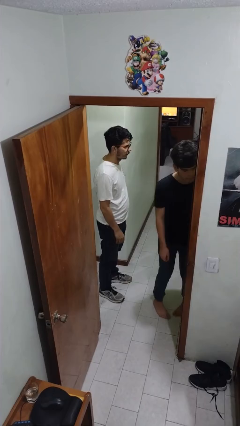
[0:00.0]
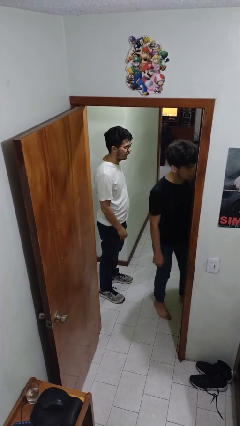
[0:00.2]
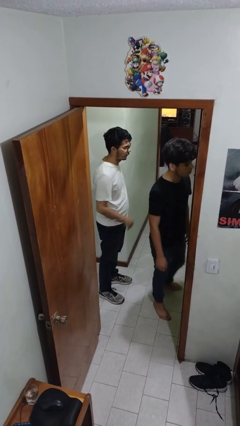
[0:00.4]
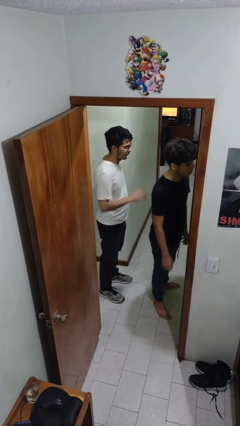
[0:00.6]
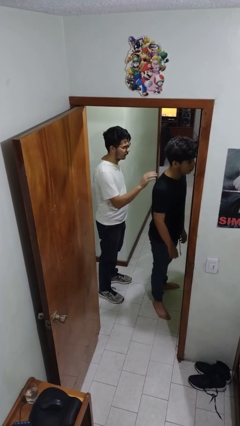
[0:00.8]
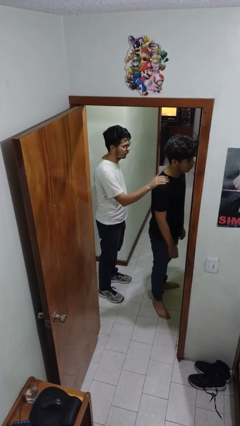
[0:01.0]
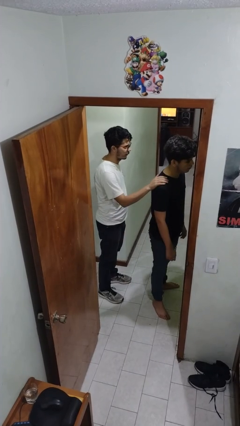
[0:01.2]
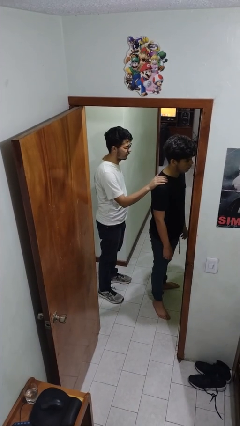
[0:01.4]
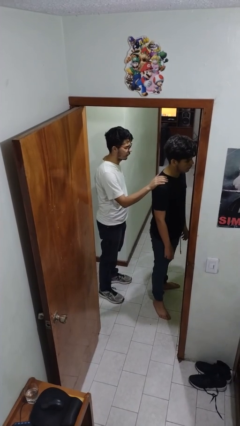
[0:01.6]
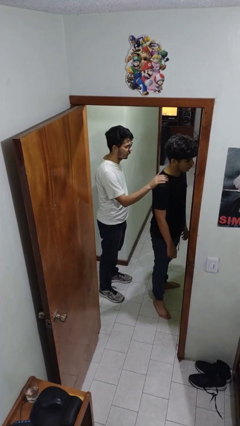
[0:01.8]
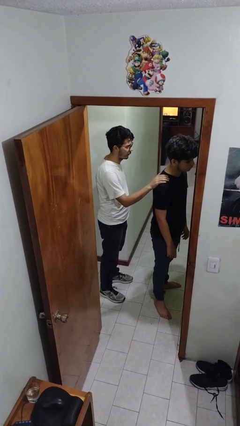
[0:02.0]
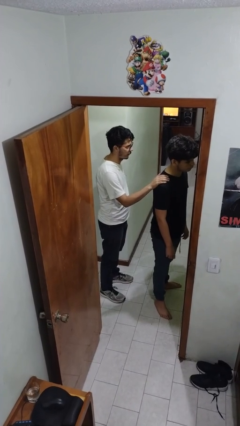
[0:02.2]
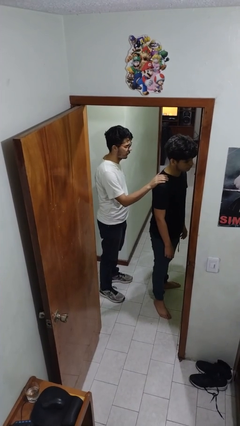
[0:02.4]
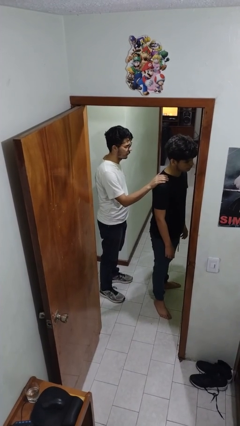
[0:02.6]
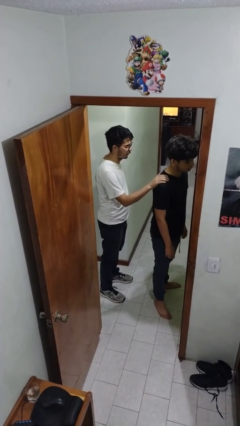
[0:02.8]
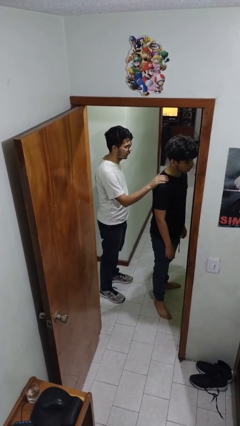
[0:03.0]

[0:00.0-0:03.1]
person grabs person by shoulder

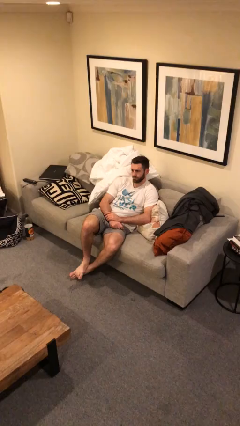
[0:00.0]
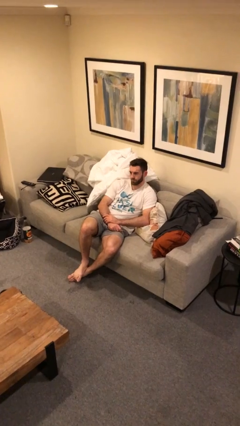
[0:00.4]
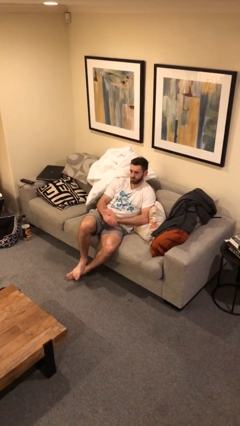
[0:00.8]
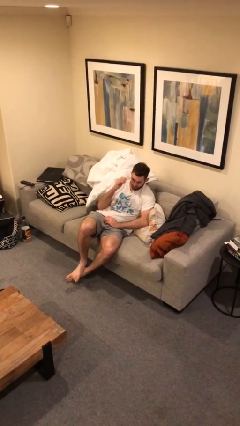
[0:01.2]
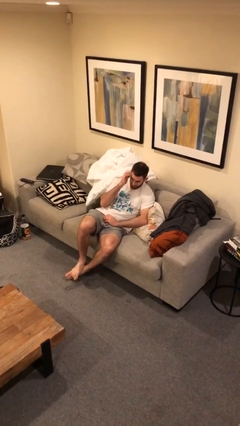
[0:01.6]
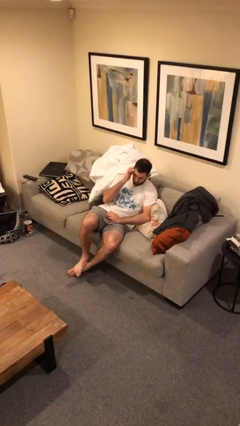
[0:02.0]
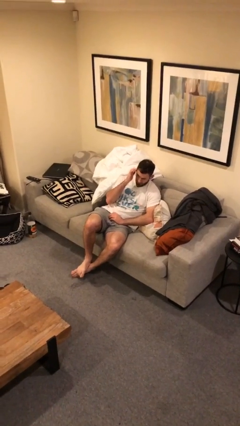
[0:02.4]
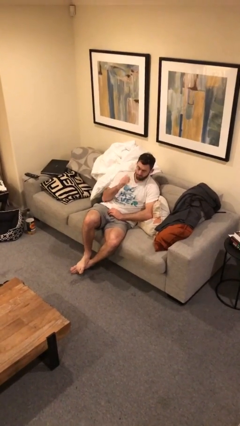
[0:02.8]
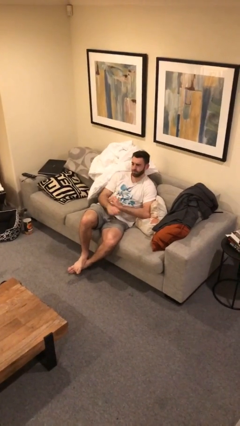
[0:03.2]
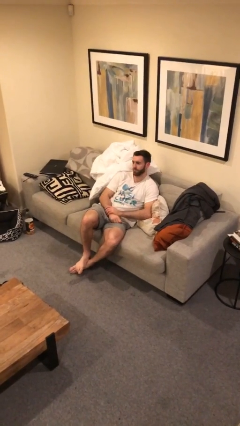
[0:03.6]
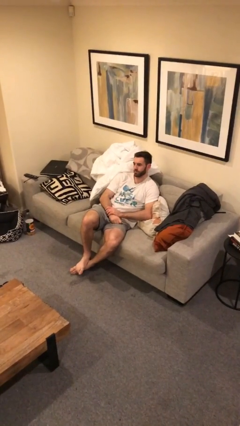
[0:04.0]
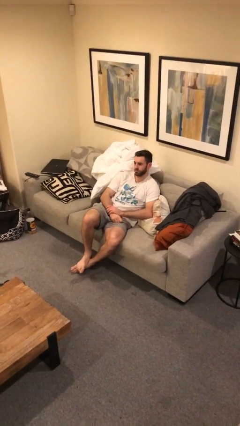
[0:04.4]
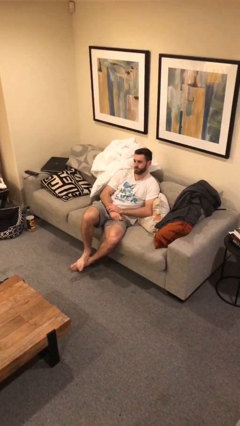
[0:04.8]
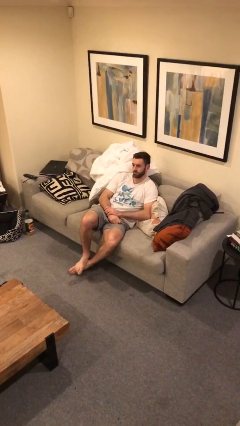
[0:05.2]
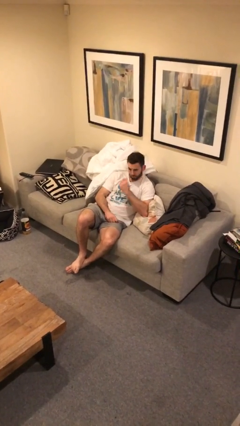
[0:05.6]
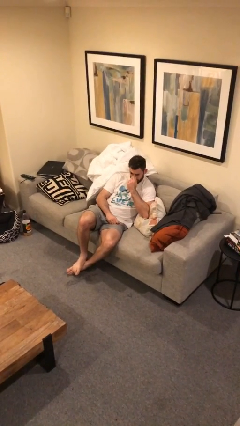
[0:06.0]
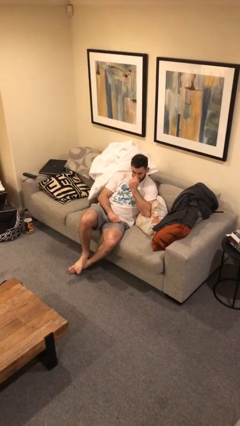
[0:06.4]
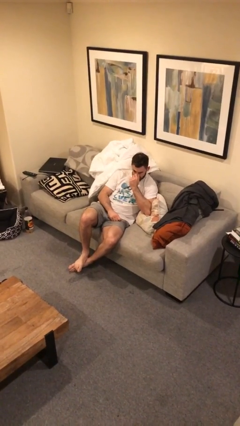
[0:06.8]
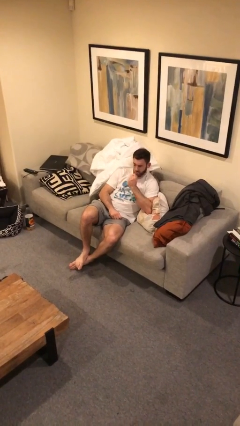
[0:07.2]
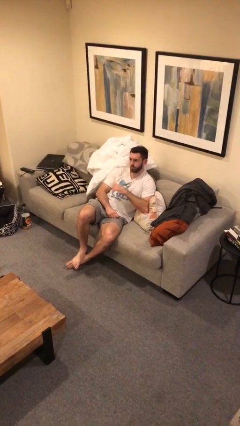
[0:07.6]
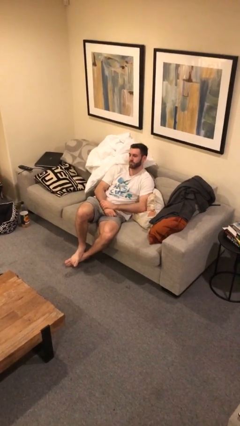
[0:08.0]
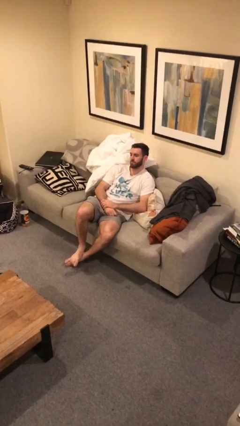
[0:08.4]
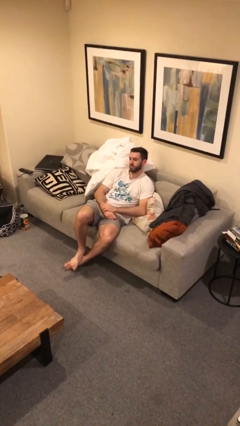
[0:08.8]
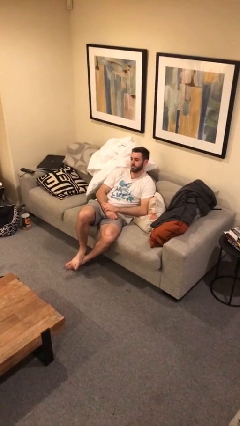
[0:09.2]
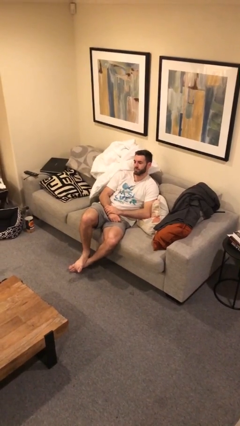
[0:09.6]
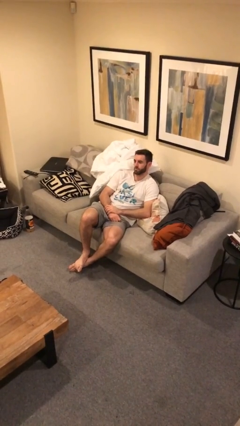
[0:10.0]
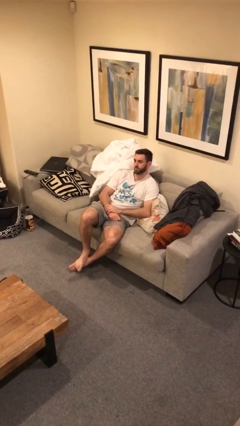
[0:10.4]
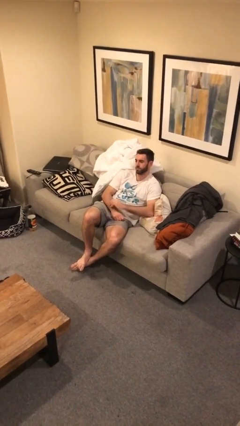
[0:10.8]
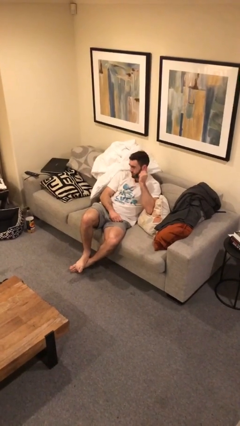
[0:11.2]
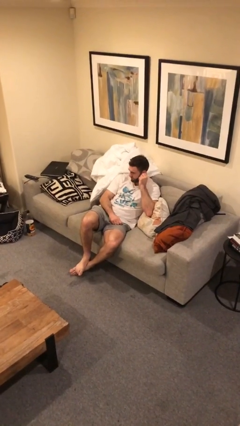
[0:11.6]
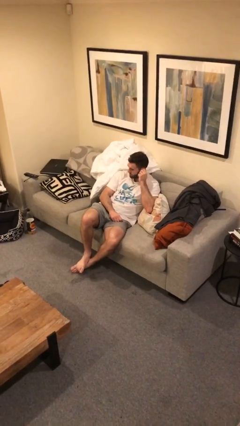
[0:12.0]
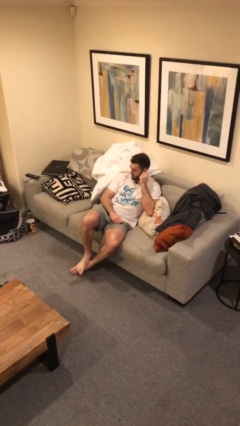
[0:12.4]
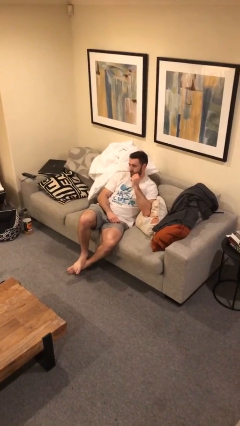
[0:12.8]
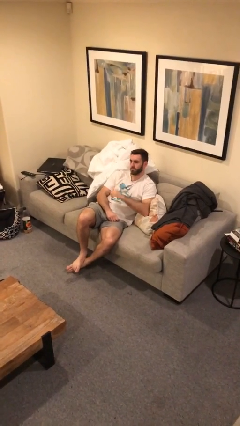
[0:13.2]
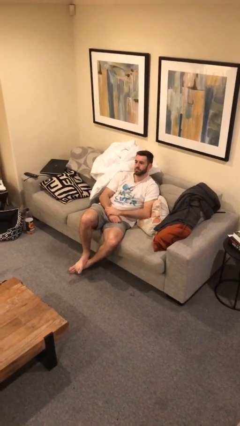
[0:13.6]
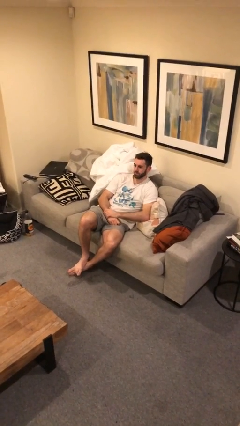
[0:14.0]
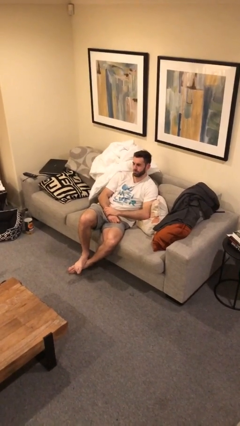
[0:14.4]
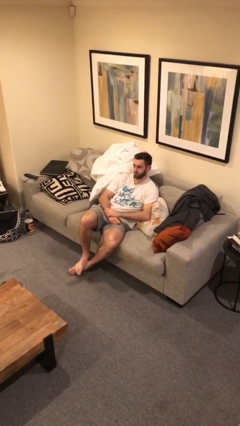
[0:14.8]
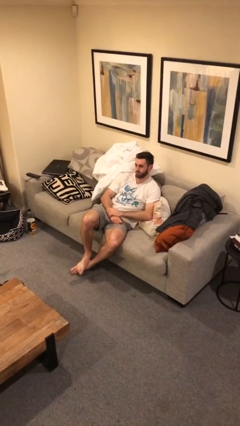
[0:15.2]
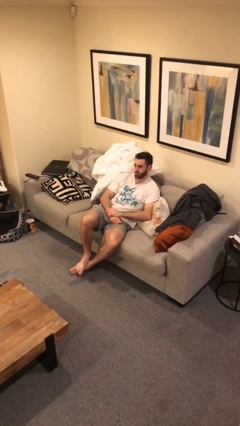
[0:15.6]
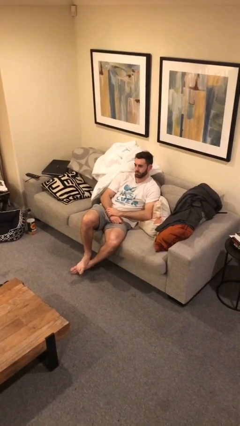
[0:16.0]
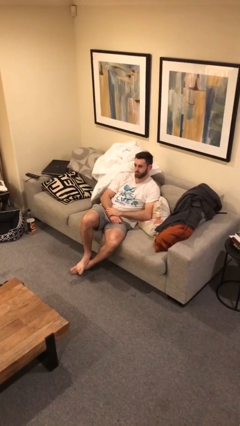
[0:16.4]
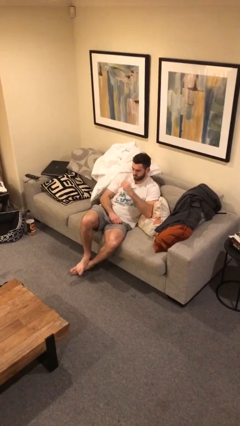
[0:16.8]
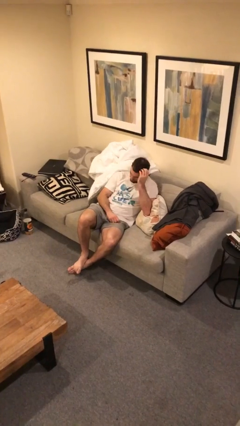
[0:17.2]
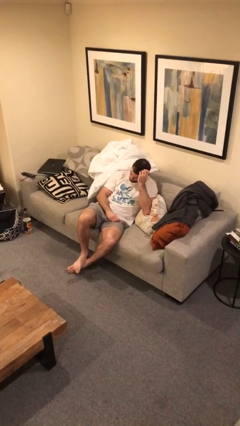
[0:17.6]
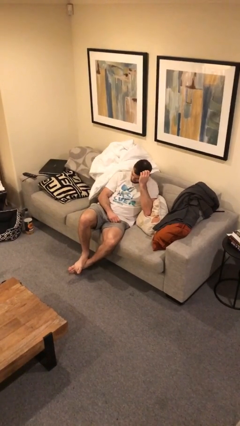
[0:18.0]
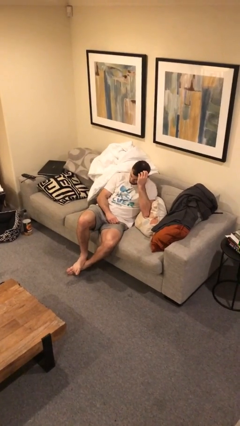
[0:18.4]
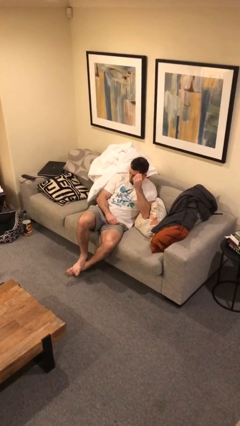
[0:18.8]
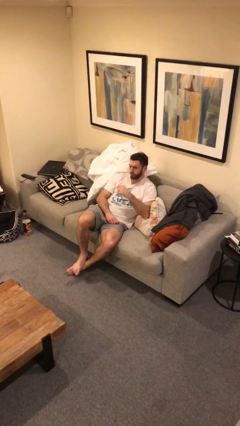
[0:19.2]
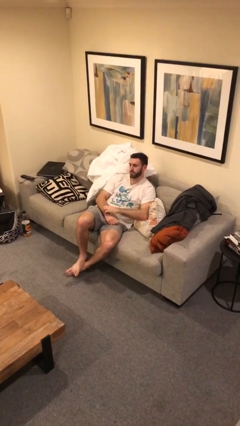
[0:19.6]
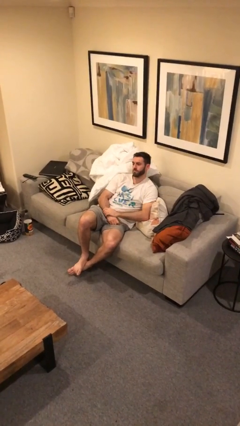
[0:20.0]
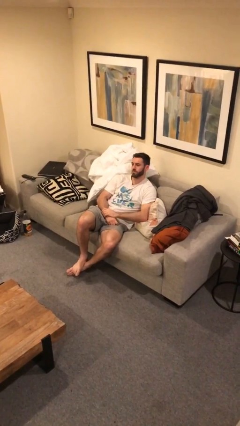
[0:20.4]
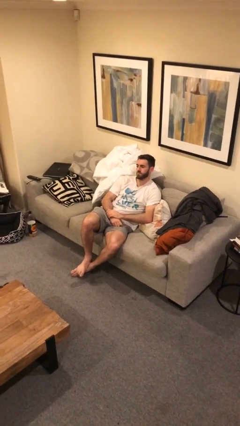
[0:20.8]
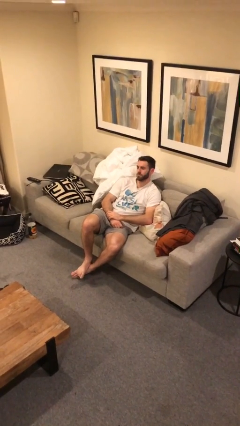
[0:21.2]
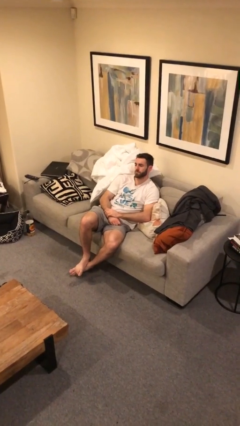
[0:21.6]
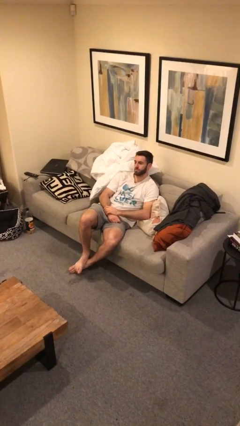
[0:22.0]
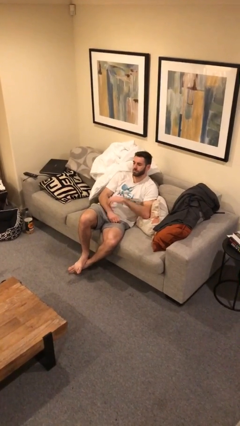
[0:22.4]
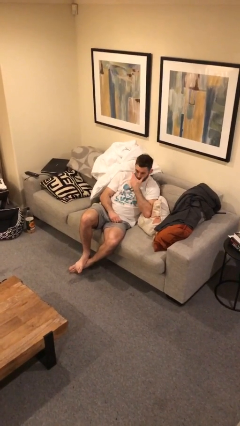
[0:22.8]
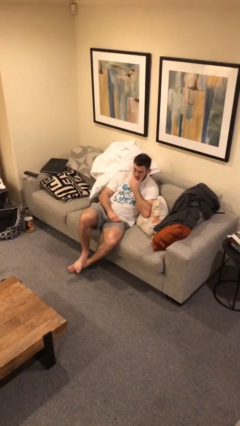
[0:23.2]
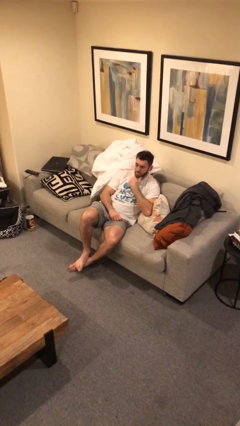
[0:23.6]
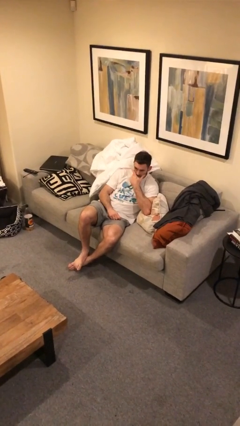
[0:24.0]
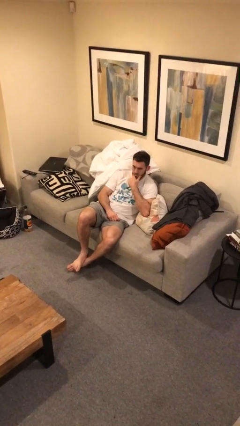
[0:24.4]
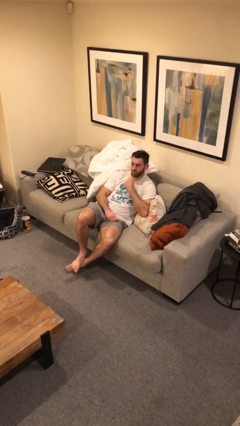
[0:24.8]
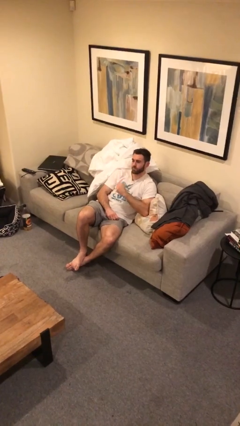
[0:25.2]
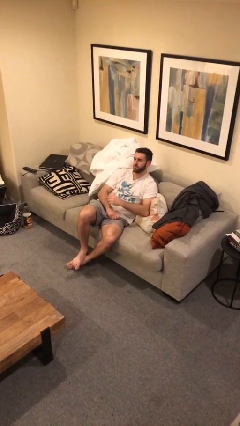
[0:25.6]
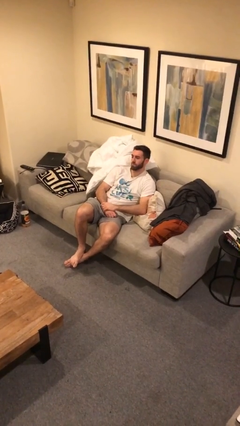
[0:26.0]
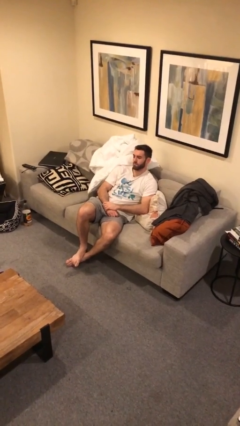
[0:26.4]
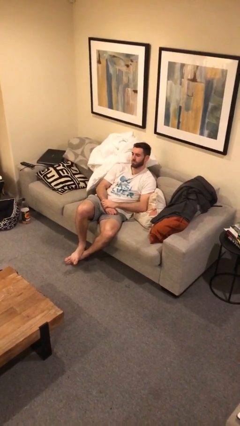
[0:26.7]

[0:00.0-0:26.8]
person scratches face

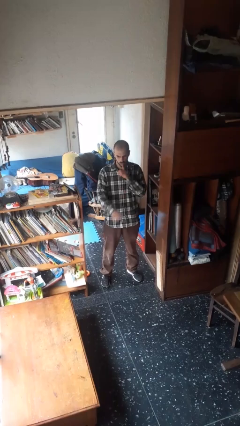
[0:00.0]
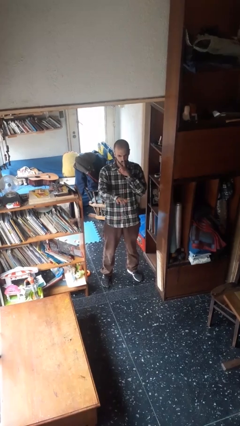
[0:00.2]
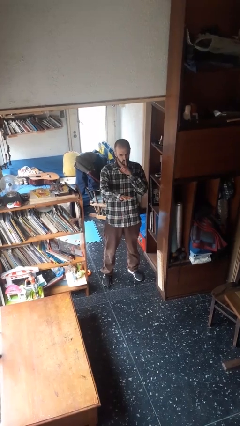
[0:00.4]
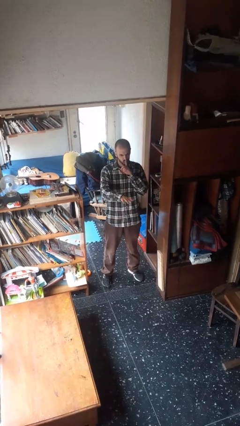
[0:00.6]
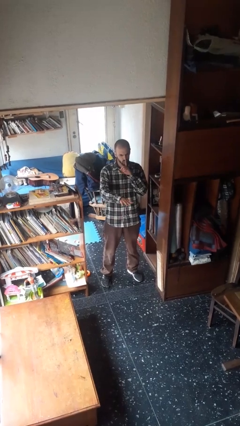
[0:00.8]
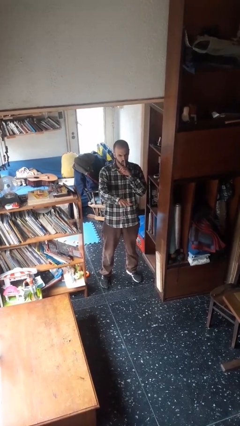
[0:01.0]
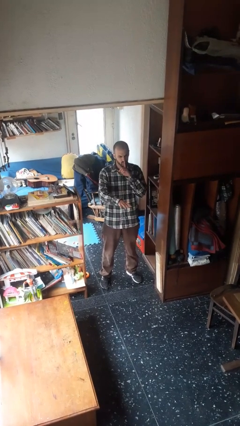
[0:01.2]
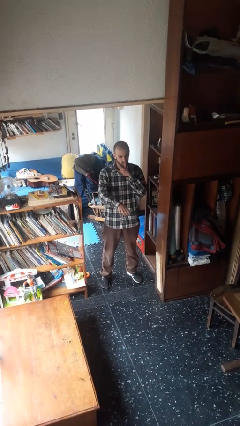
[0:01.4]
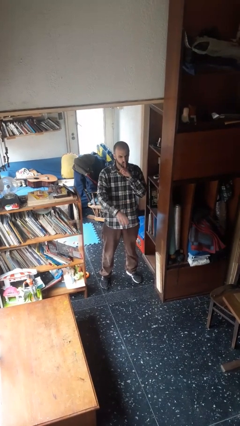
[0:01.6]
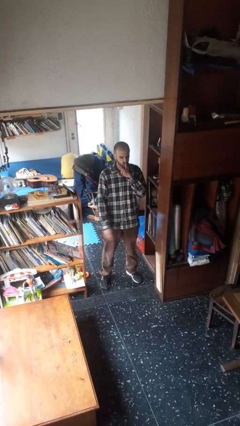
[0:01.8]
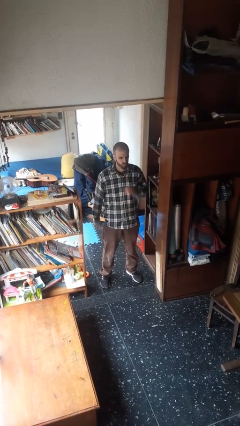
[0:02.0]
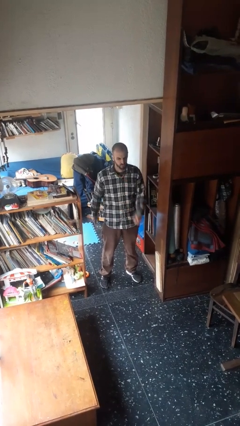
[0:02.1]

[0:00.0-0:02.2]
person gestures be quiet
